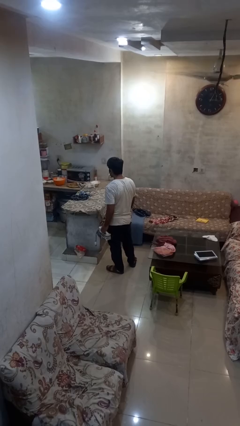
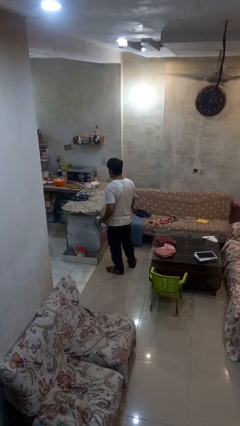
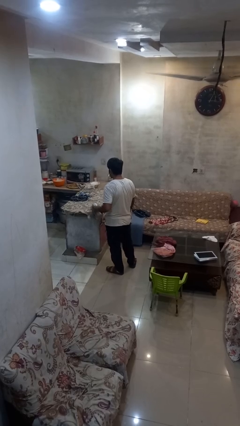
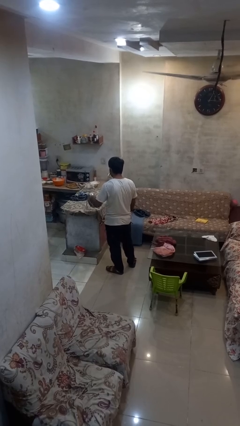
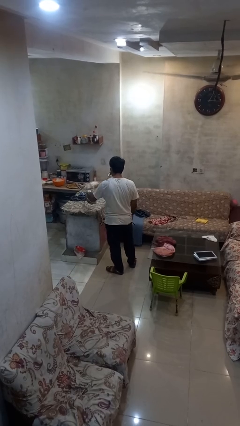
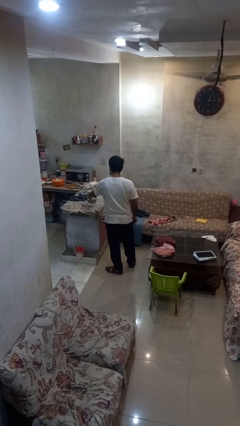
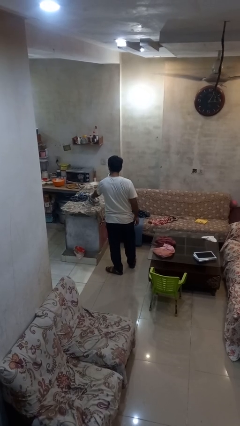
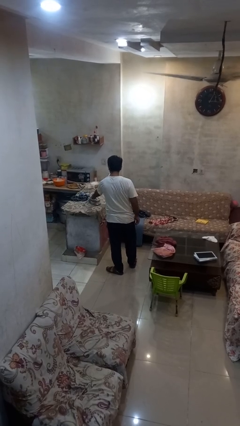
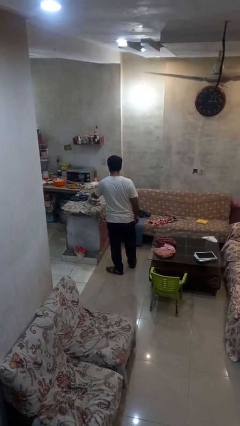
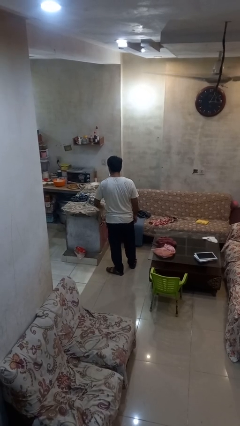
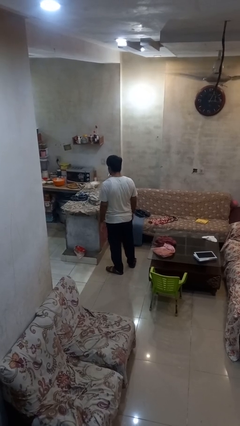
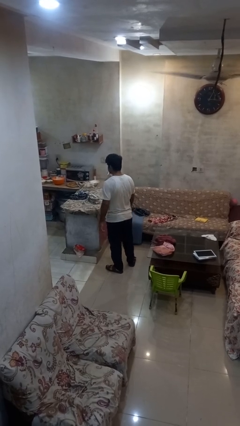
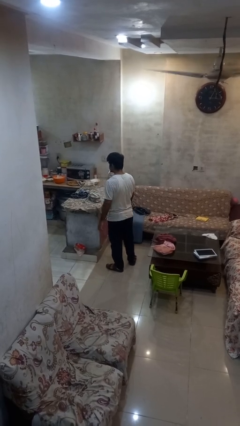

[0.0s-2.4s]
person puts down object on countertop

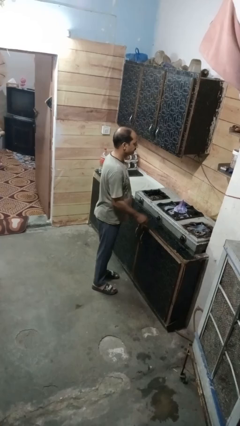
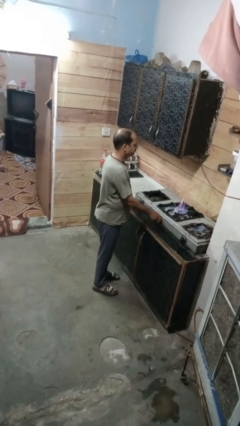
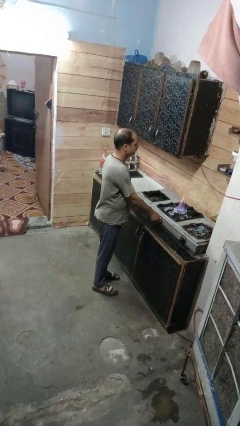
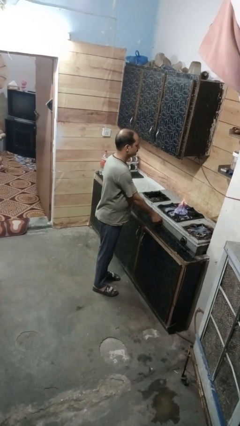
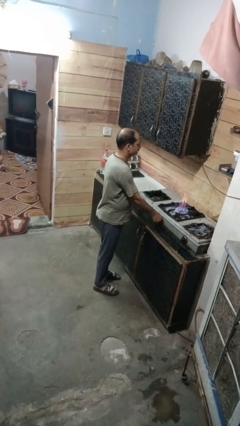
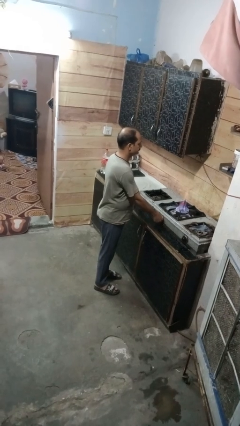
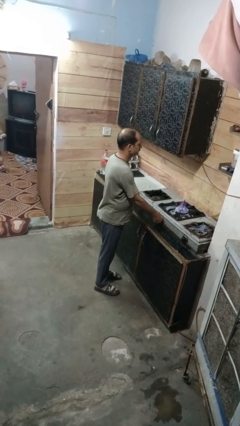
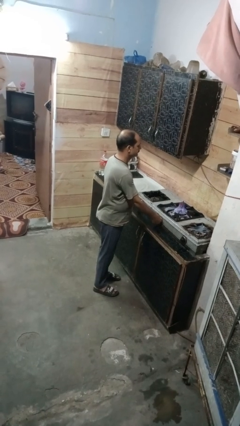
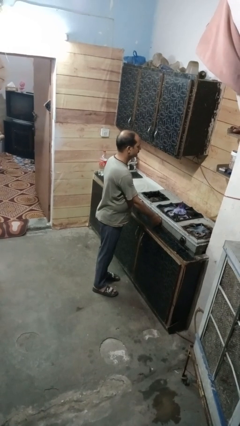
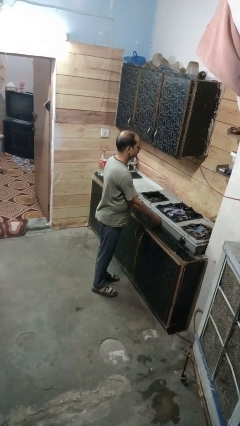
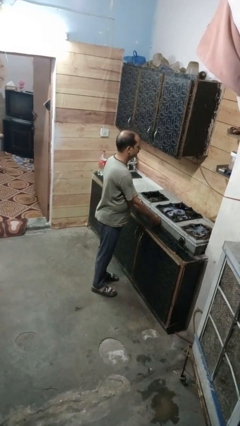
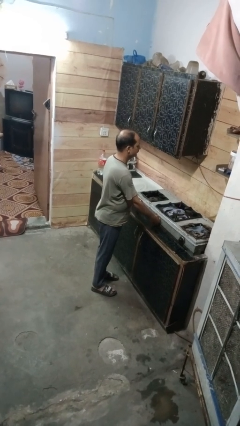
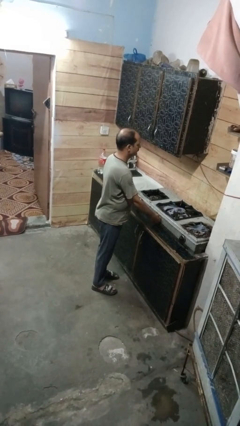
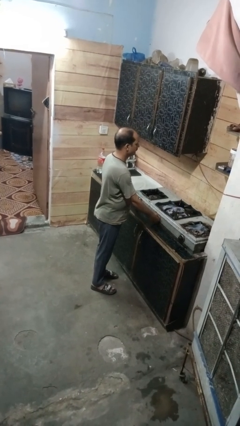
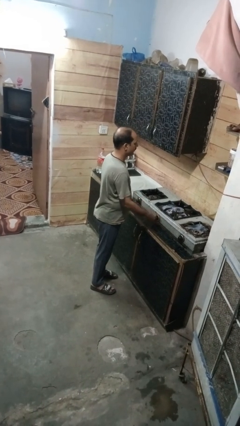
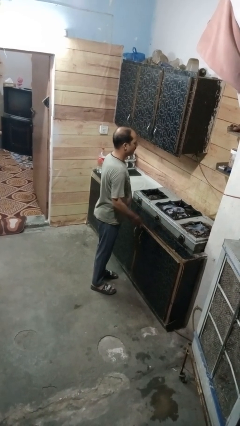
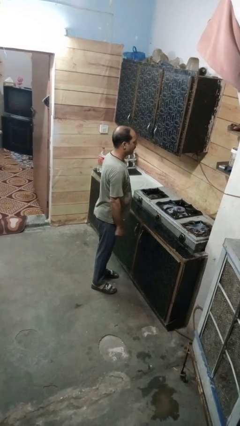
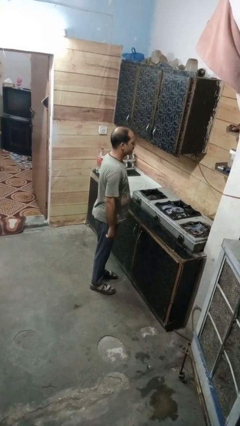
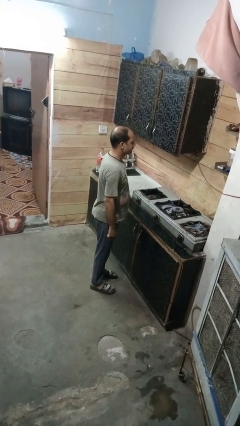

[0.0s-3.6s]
person turns off stovetop

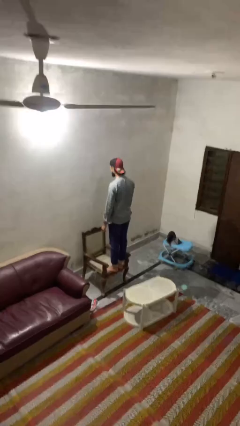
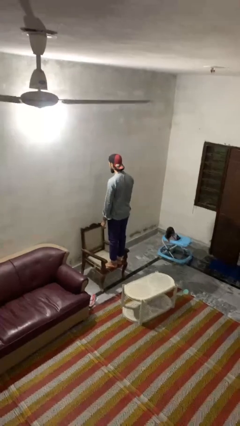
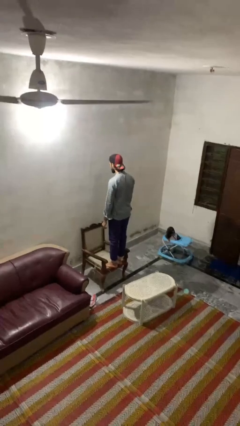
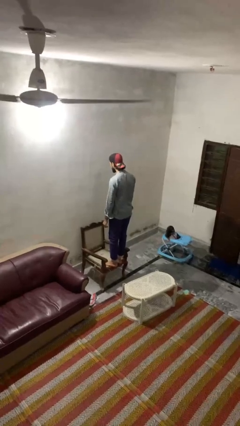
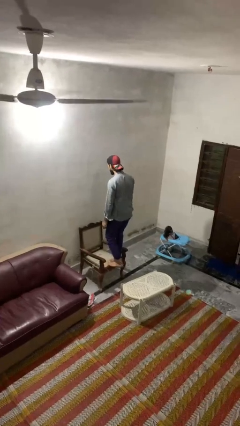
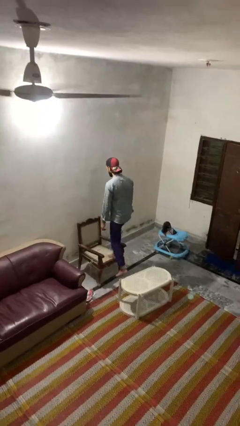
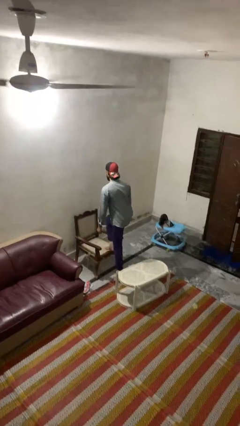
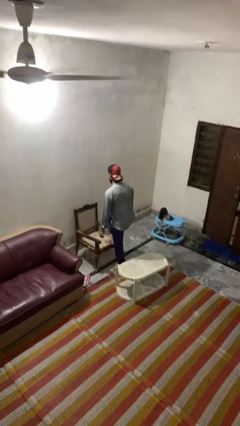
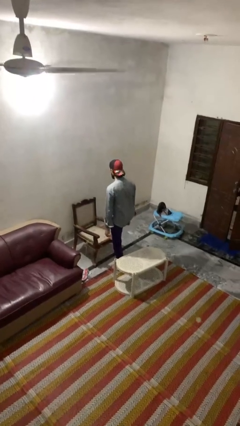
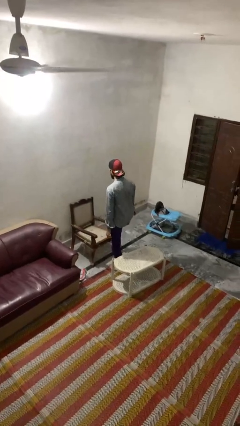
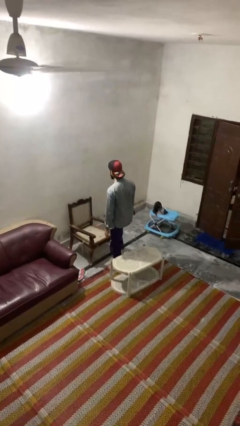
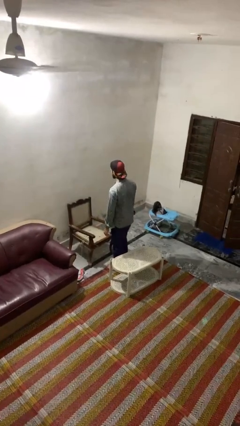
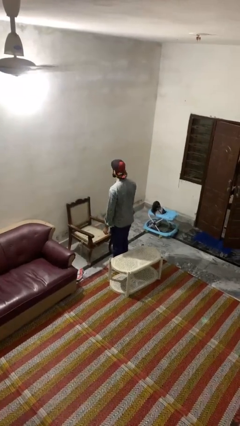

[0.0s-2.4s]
person climbs off chair

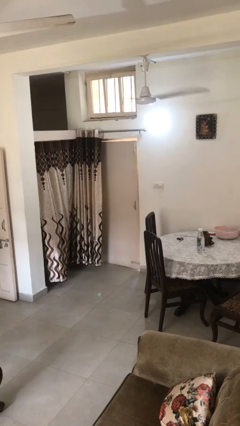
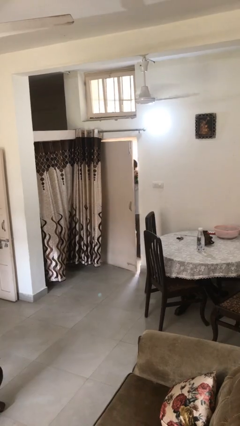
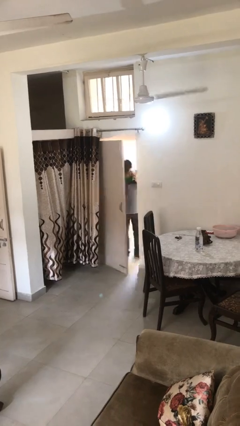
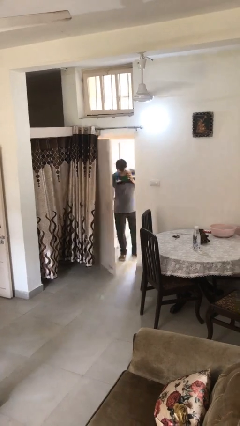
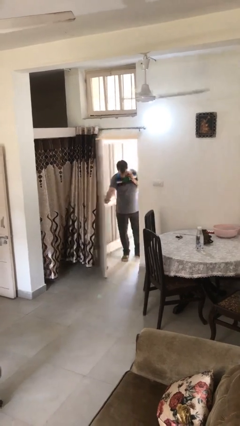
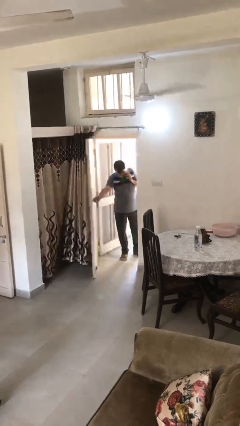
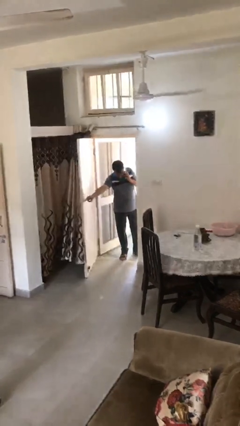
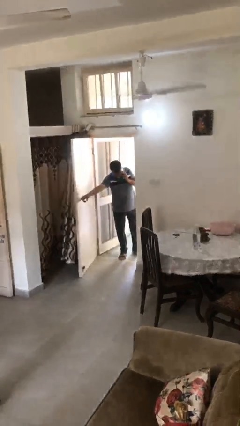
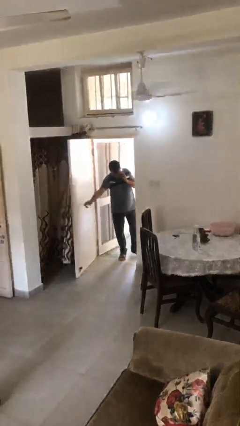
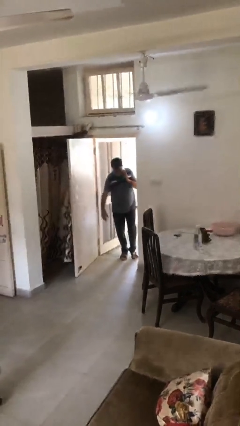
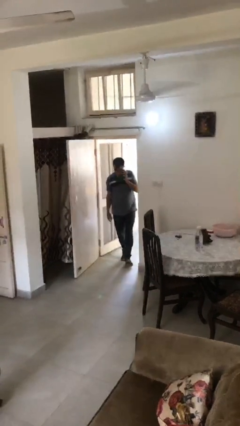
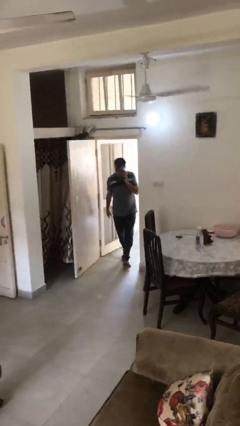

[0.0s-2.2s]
person opens facility door

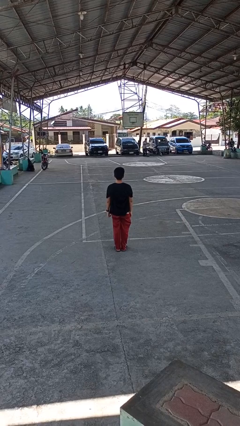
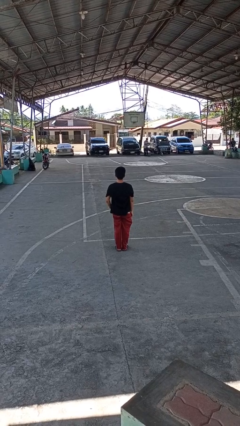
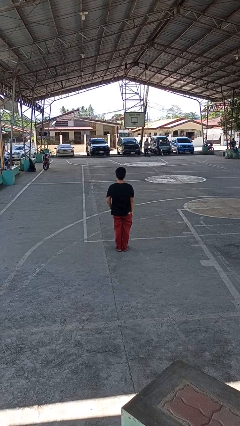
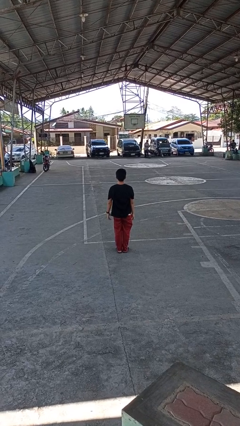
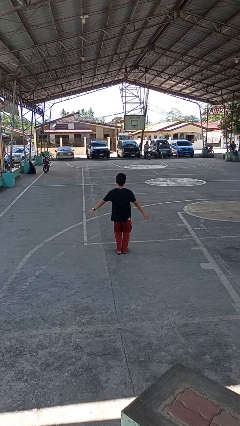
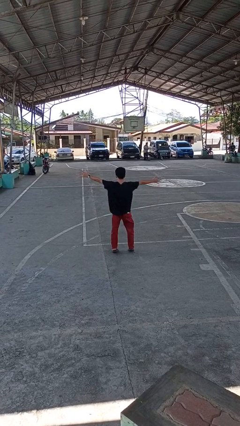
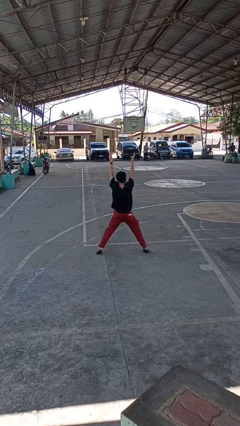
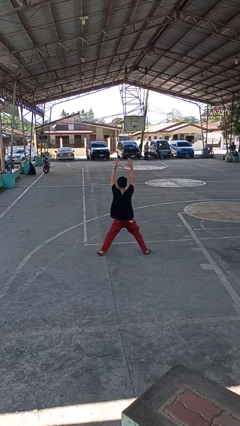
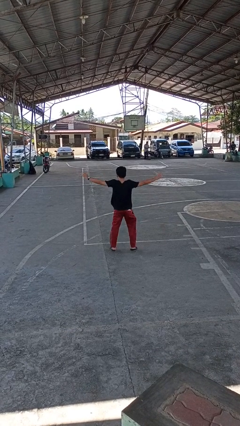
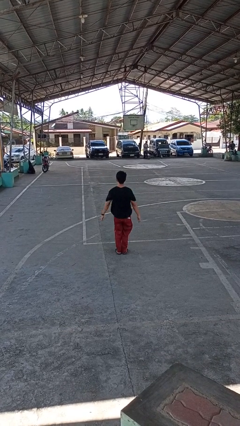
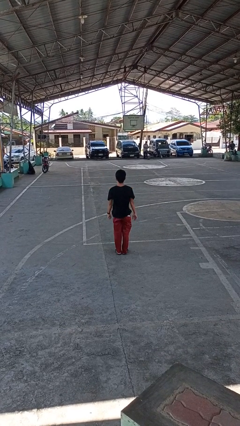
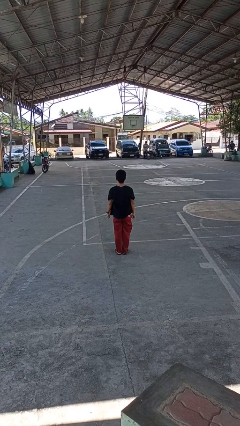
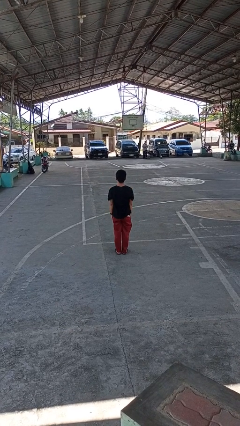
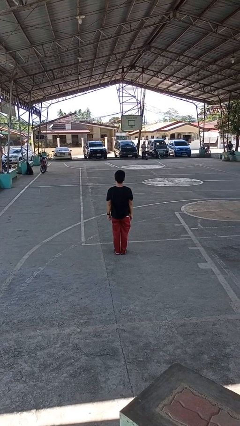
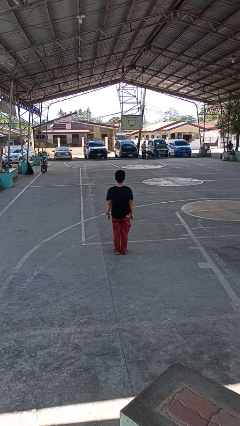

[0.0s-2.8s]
person exercises with jumping jacks

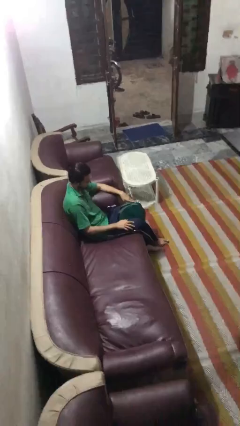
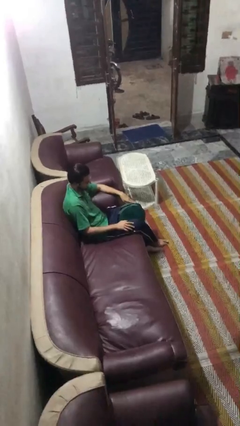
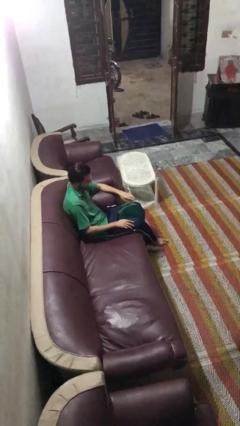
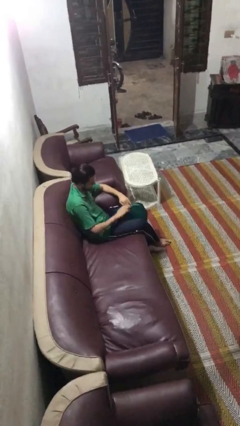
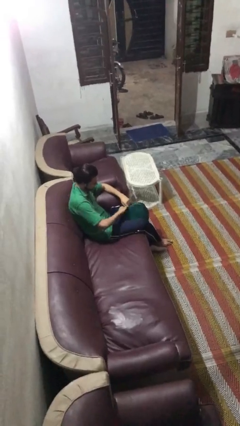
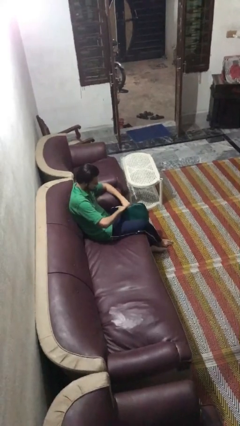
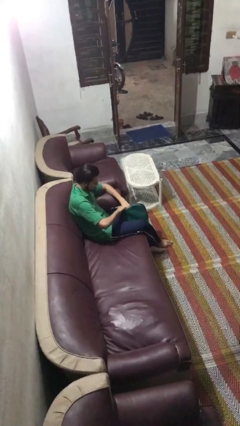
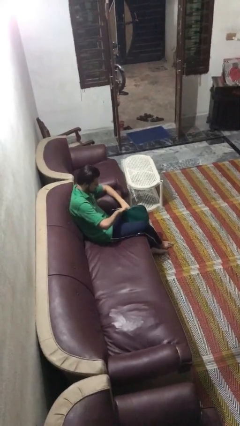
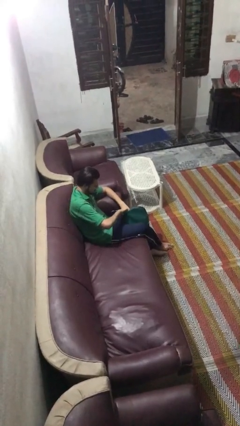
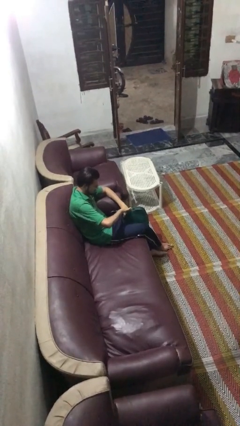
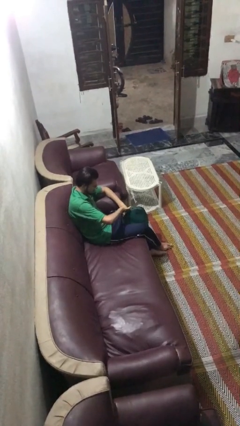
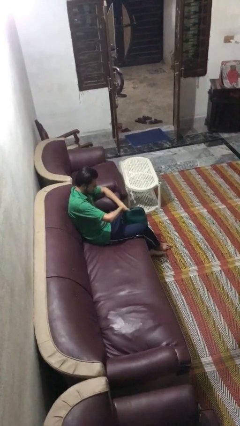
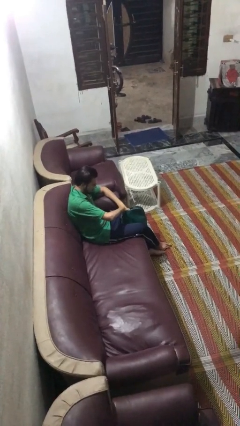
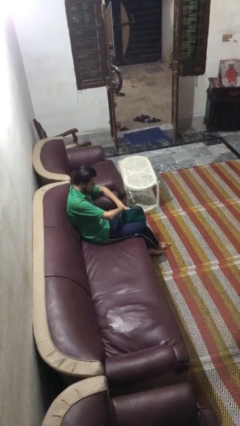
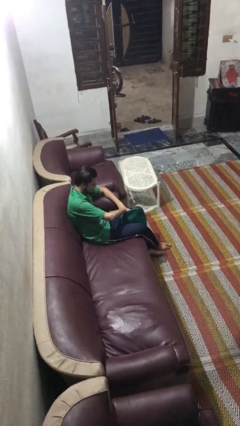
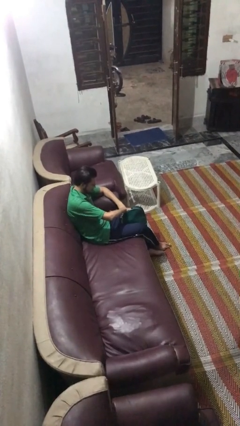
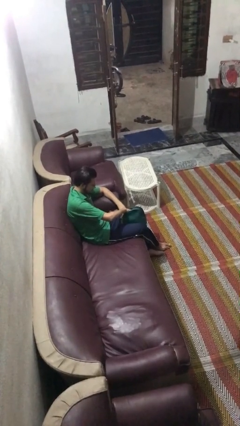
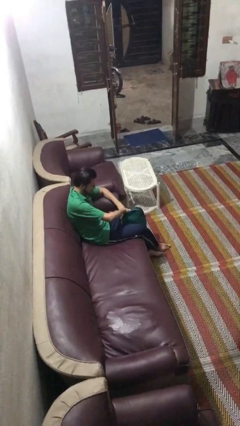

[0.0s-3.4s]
person searches in purse
